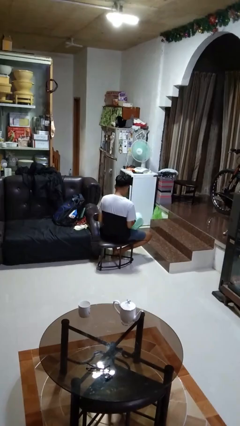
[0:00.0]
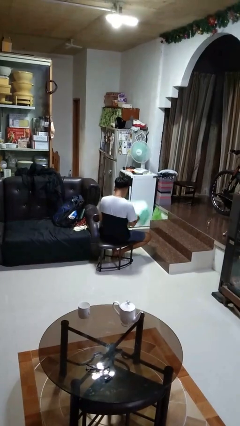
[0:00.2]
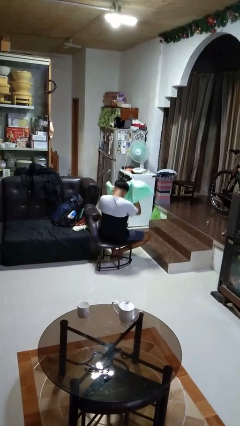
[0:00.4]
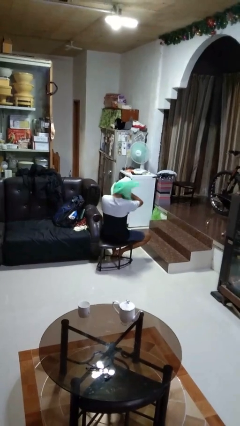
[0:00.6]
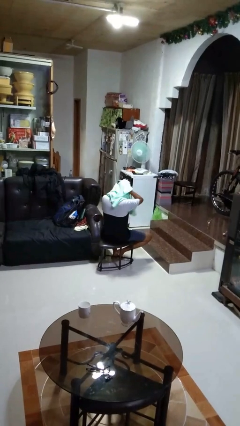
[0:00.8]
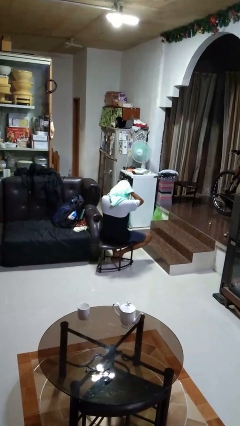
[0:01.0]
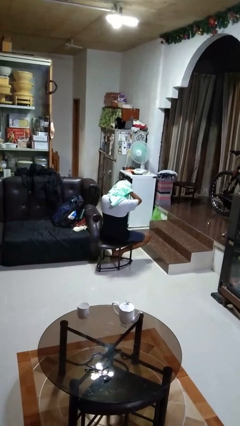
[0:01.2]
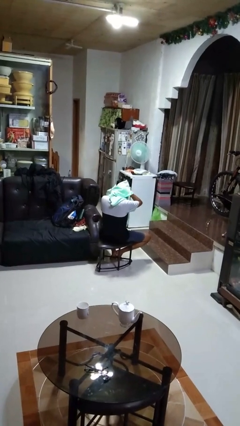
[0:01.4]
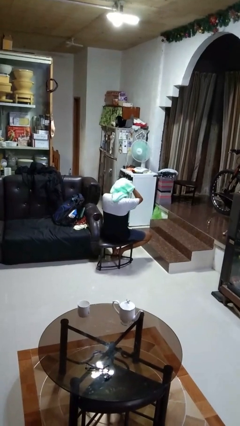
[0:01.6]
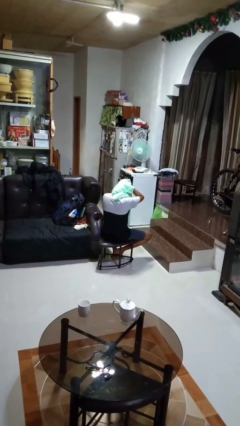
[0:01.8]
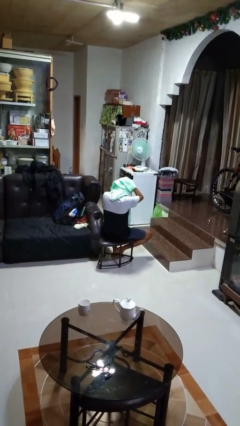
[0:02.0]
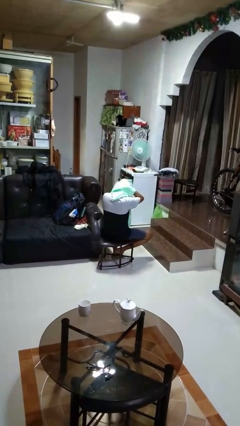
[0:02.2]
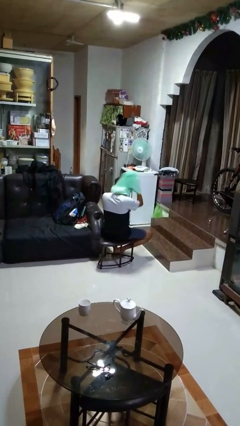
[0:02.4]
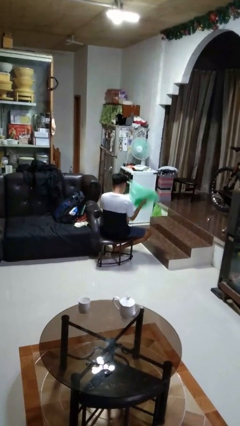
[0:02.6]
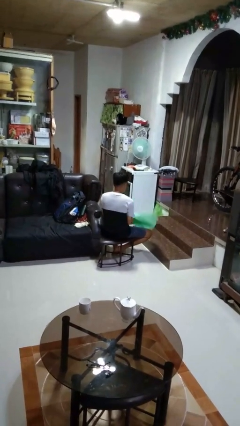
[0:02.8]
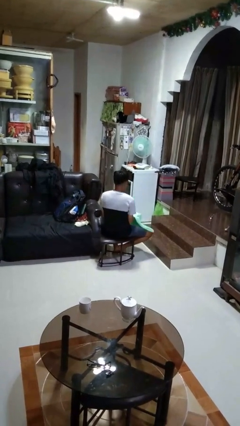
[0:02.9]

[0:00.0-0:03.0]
person dries hair with towel

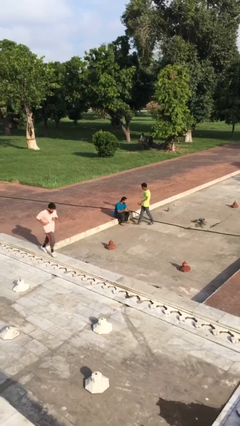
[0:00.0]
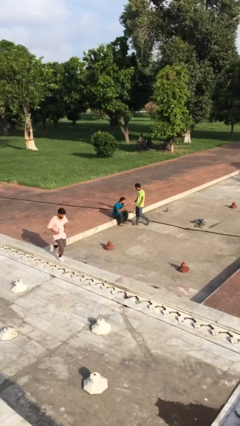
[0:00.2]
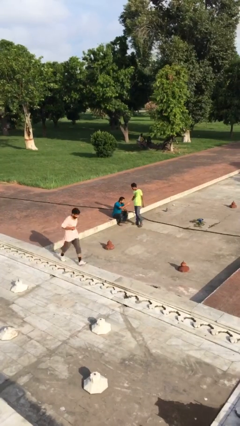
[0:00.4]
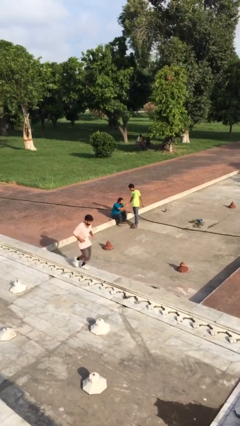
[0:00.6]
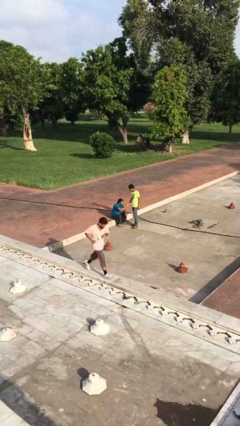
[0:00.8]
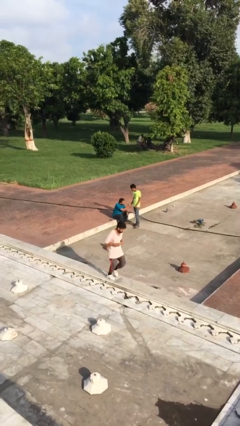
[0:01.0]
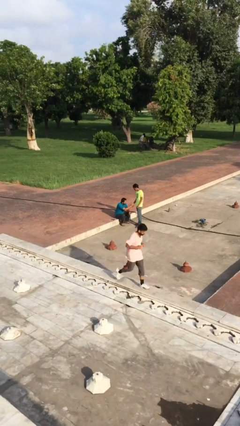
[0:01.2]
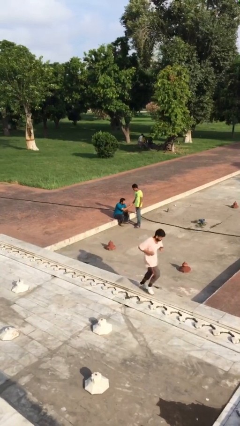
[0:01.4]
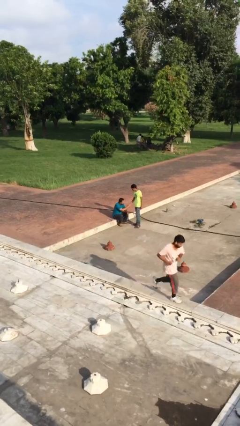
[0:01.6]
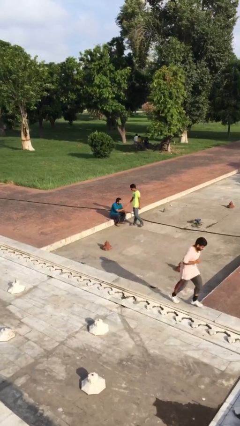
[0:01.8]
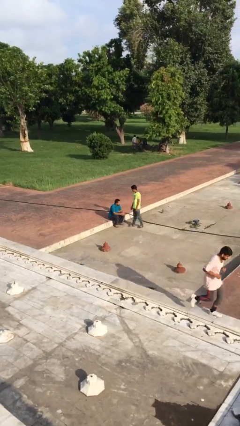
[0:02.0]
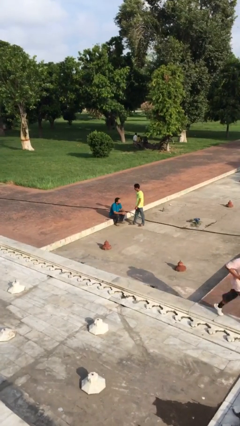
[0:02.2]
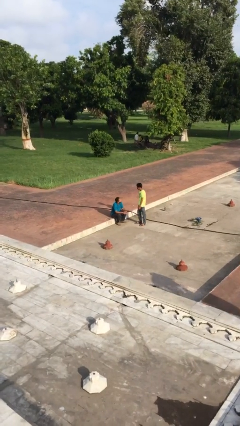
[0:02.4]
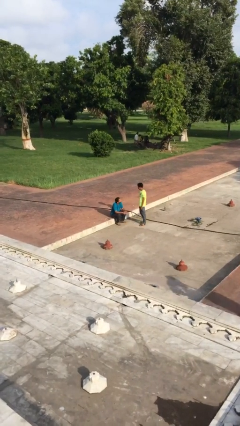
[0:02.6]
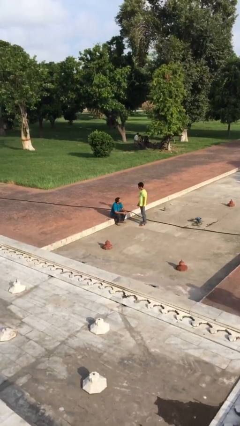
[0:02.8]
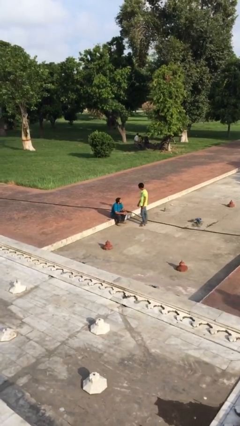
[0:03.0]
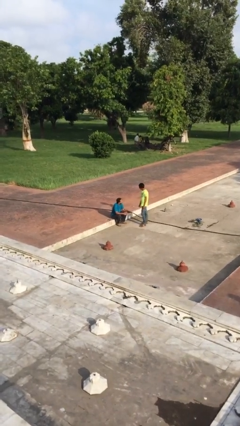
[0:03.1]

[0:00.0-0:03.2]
person shakes hand

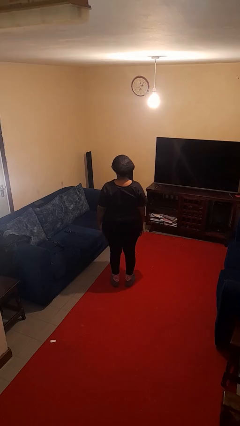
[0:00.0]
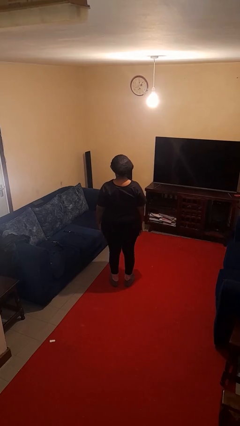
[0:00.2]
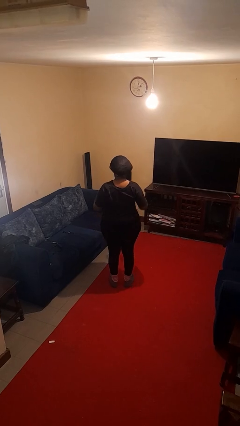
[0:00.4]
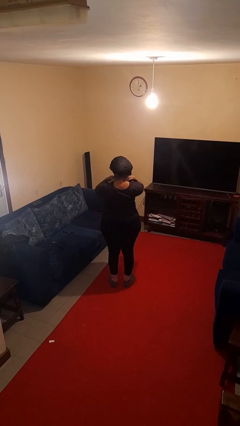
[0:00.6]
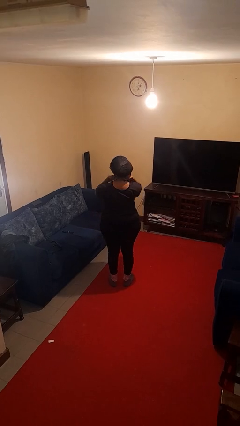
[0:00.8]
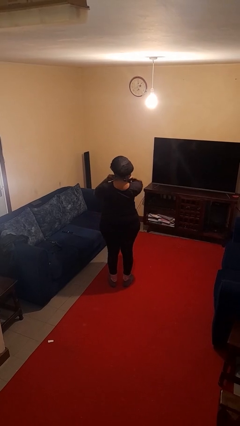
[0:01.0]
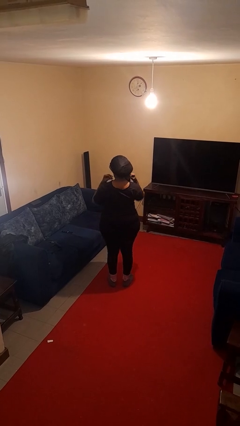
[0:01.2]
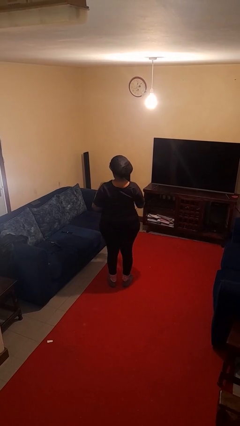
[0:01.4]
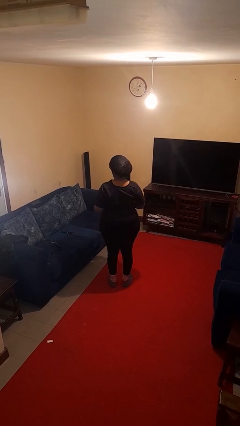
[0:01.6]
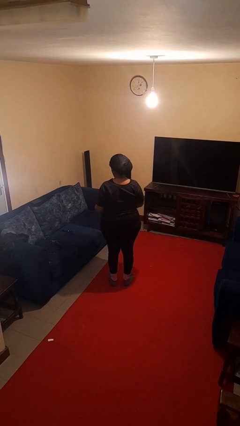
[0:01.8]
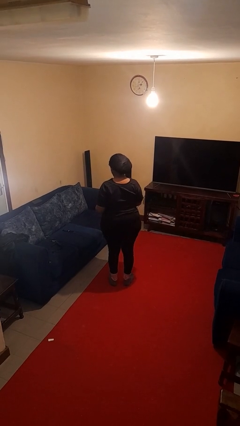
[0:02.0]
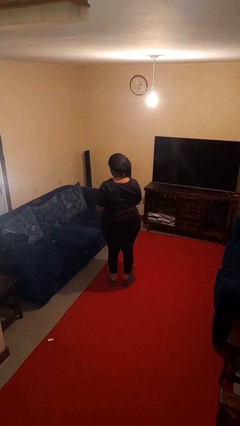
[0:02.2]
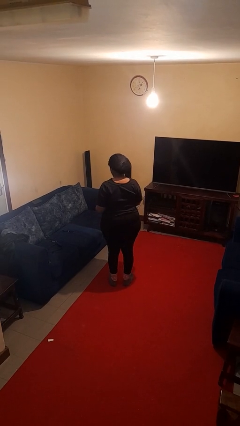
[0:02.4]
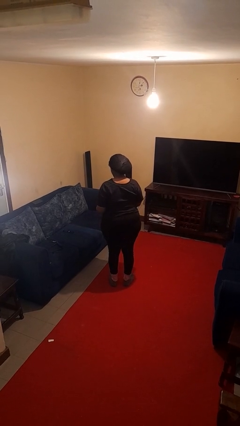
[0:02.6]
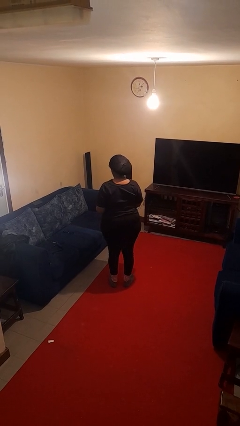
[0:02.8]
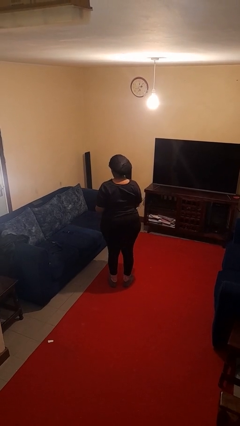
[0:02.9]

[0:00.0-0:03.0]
person takes off necklace

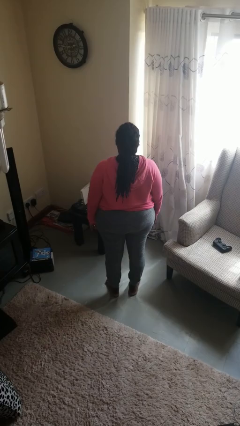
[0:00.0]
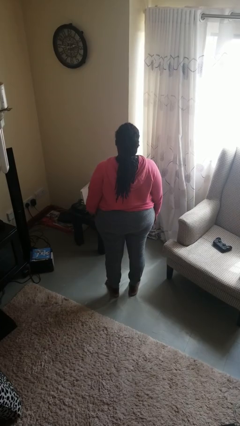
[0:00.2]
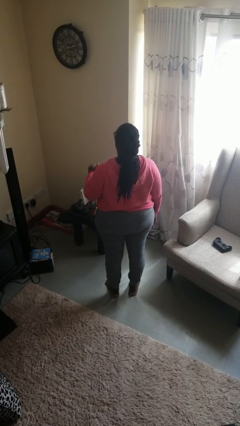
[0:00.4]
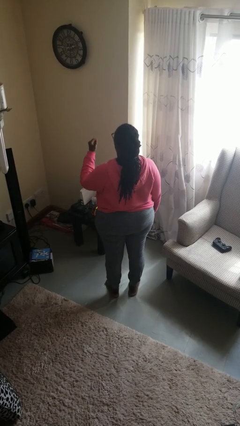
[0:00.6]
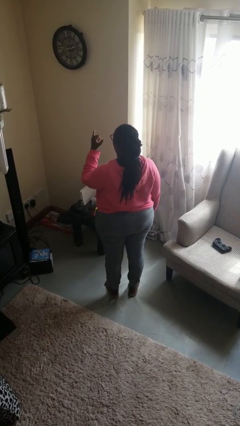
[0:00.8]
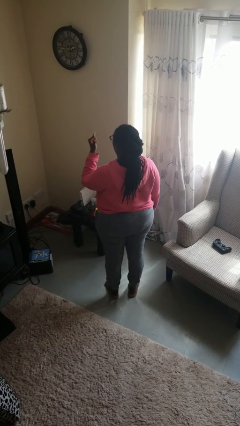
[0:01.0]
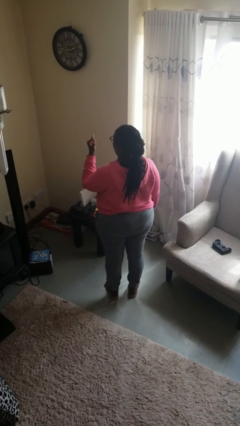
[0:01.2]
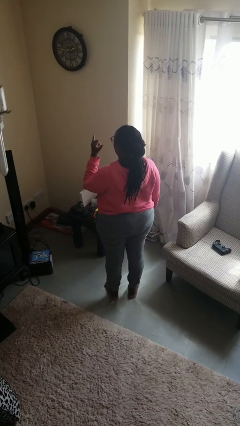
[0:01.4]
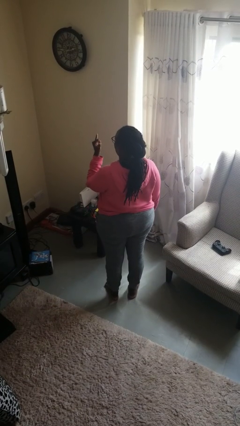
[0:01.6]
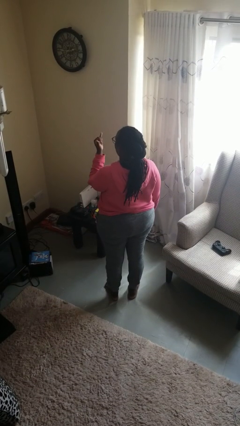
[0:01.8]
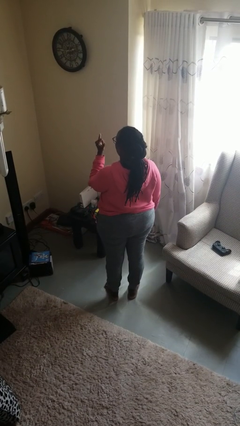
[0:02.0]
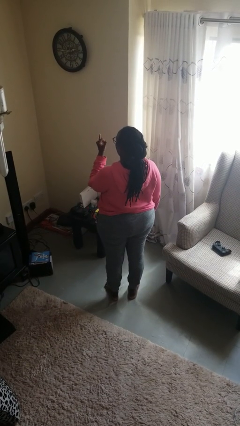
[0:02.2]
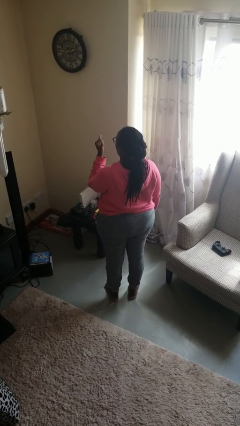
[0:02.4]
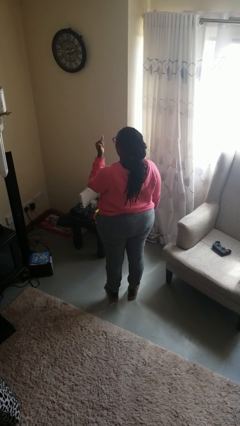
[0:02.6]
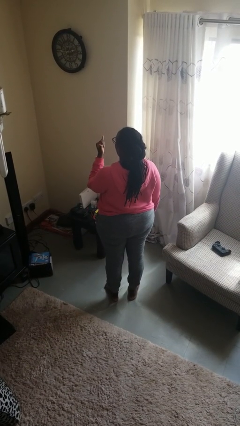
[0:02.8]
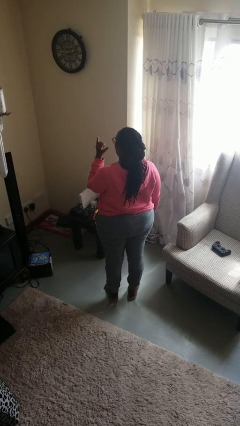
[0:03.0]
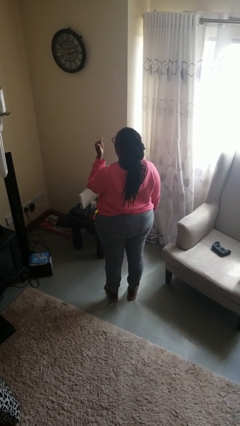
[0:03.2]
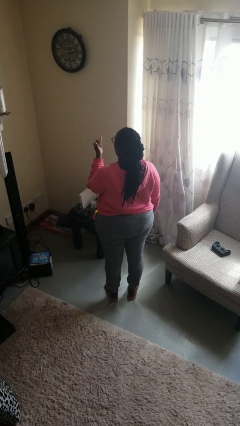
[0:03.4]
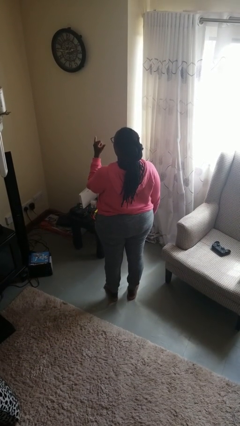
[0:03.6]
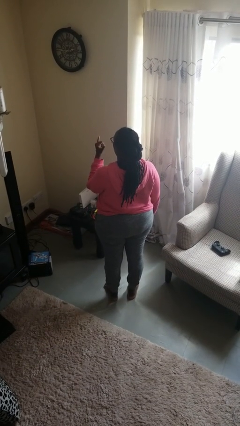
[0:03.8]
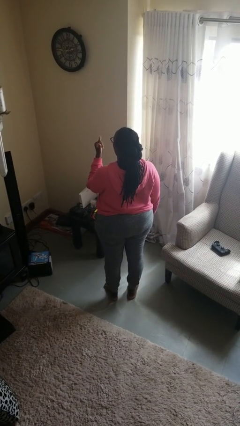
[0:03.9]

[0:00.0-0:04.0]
person gestures hang loose

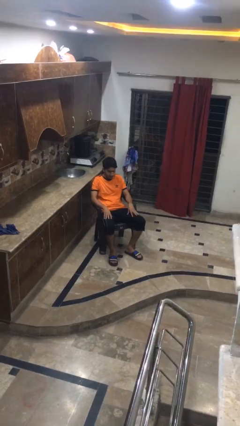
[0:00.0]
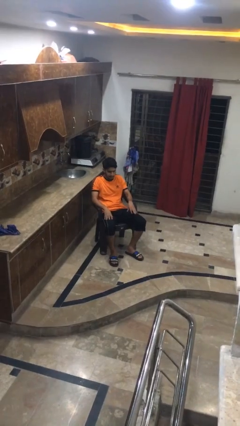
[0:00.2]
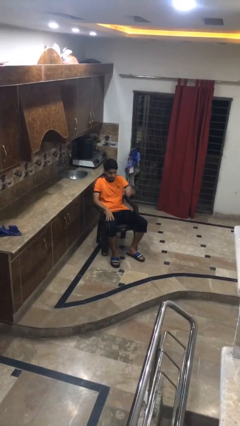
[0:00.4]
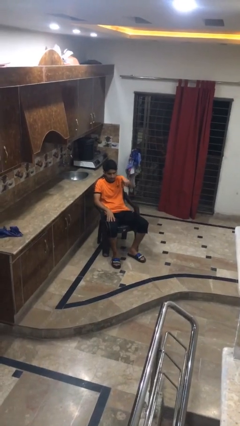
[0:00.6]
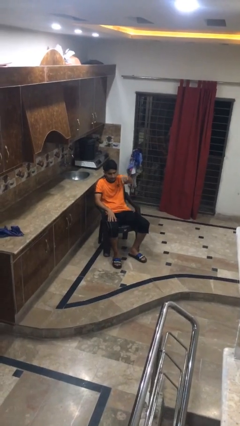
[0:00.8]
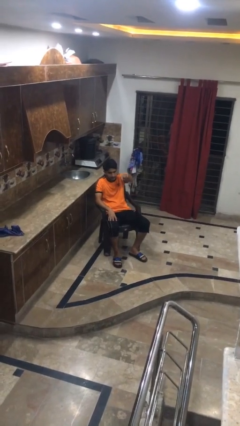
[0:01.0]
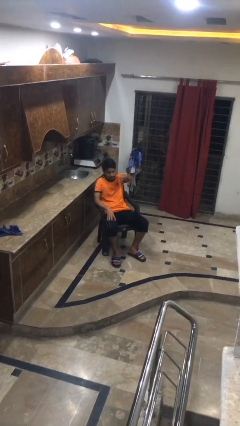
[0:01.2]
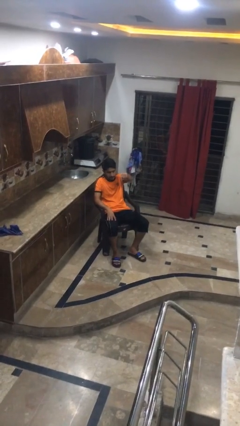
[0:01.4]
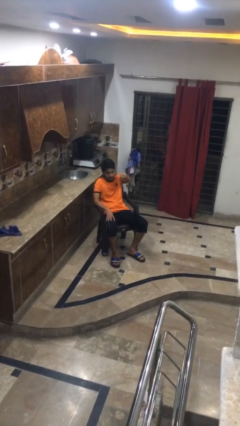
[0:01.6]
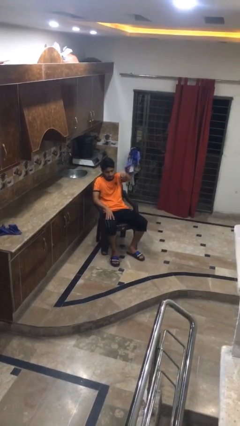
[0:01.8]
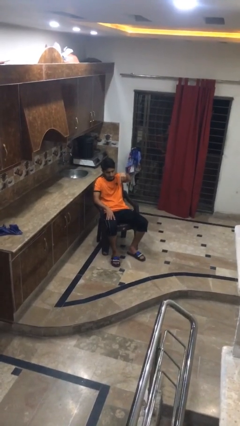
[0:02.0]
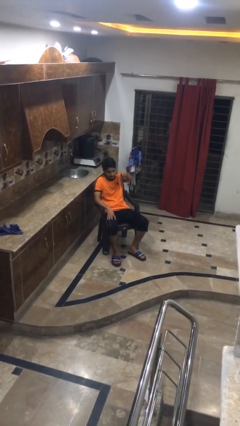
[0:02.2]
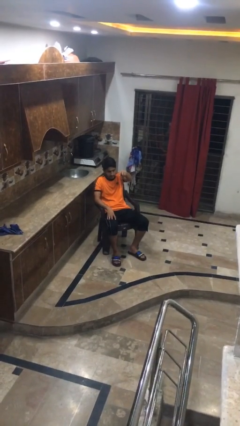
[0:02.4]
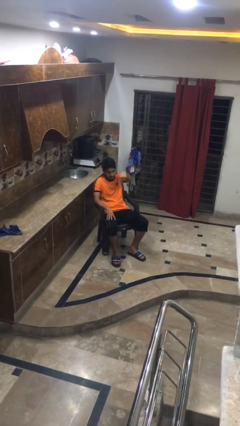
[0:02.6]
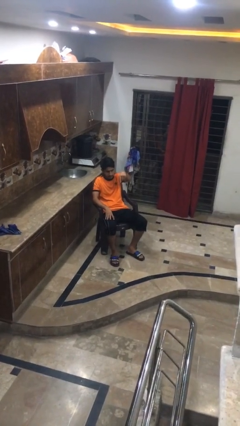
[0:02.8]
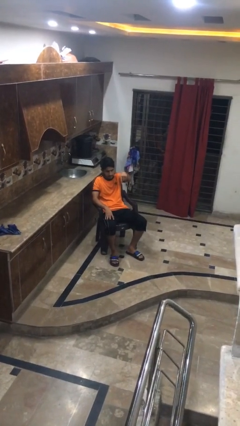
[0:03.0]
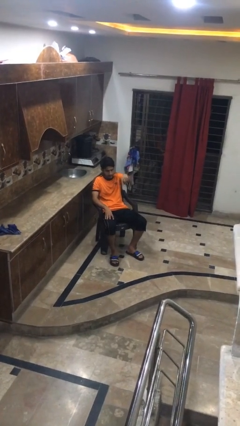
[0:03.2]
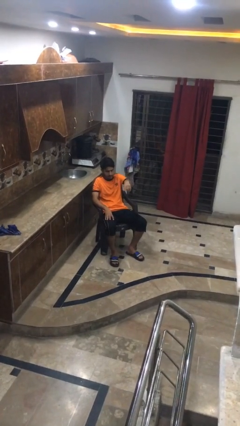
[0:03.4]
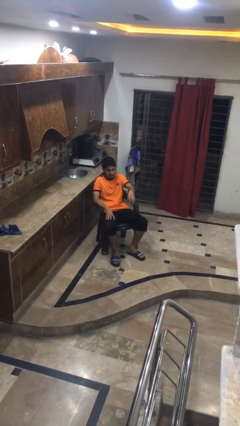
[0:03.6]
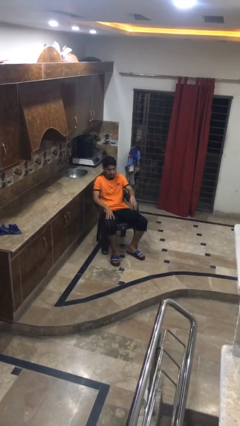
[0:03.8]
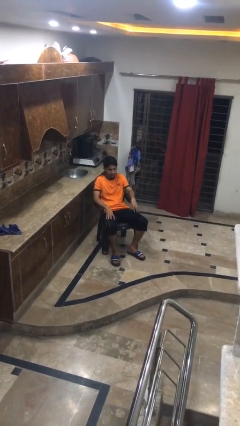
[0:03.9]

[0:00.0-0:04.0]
person gestures come here

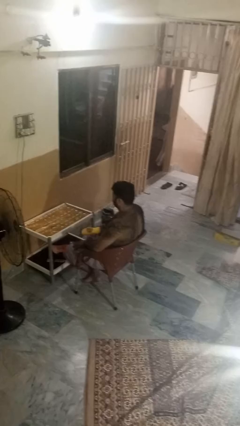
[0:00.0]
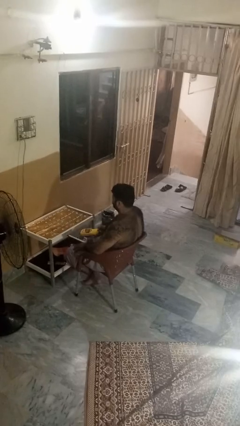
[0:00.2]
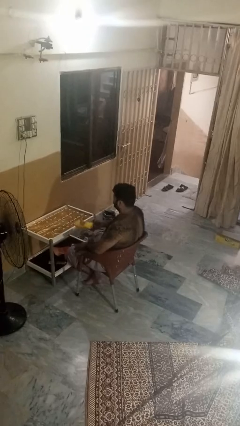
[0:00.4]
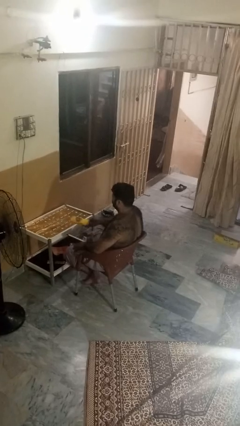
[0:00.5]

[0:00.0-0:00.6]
person picks up object from table
